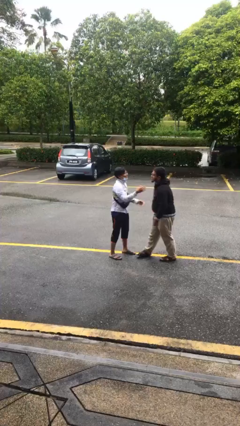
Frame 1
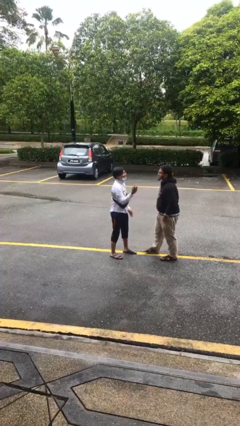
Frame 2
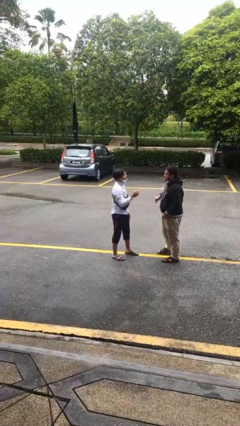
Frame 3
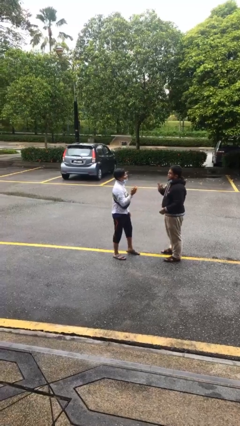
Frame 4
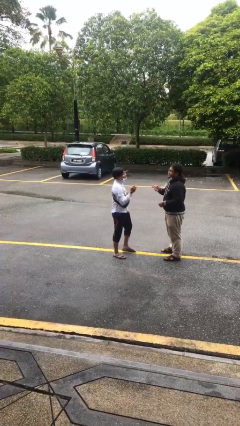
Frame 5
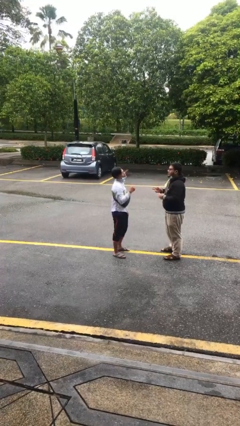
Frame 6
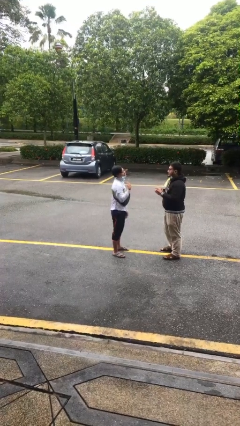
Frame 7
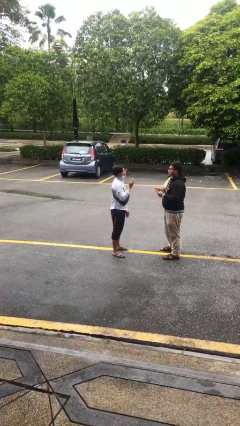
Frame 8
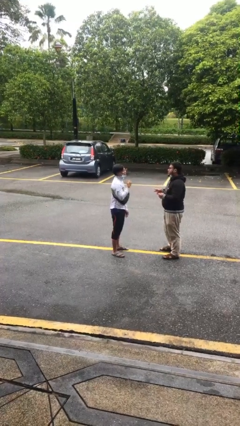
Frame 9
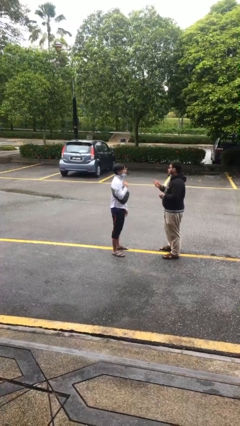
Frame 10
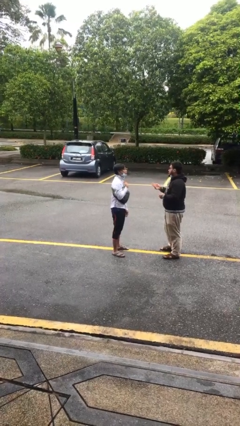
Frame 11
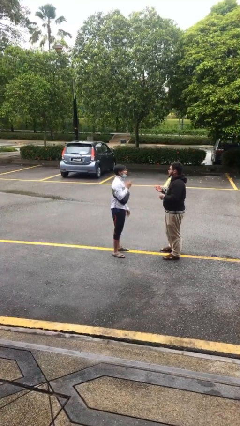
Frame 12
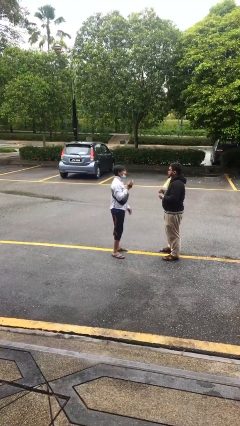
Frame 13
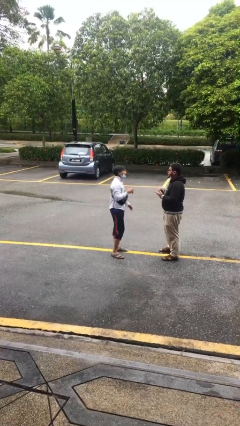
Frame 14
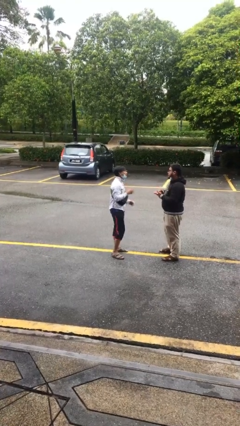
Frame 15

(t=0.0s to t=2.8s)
person talks to person

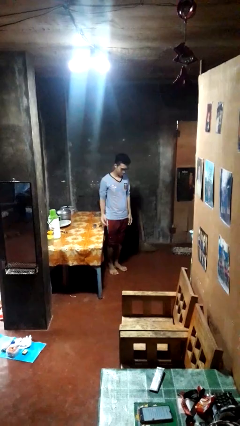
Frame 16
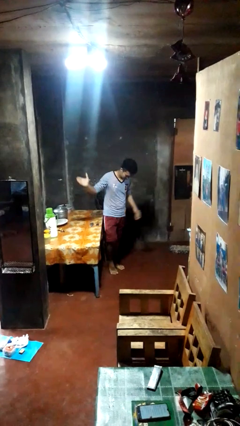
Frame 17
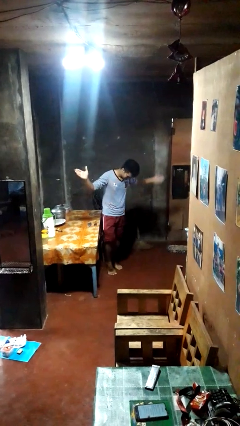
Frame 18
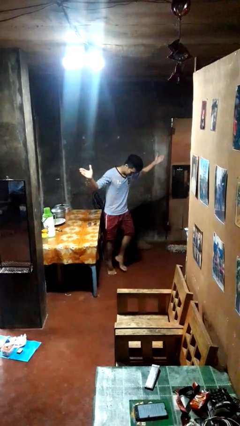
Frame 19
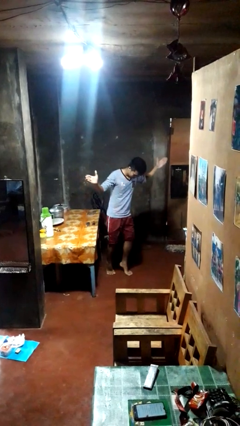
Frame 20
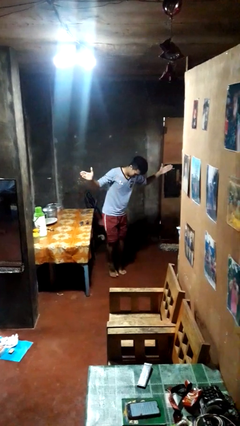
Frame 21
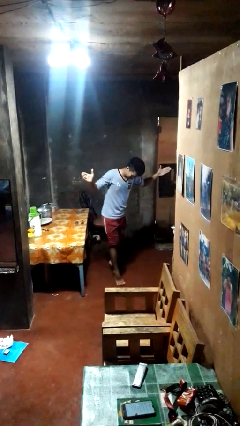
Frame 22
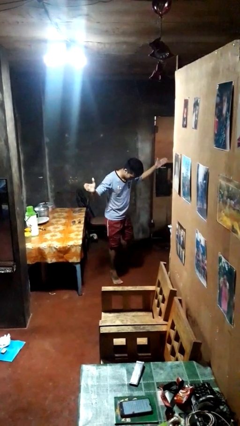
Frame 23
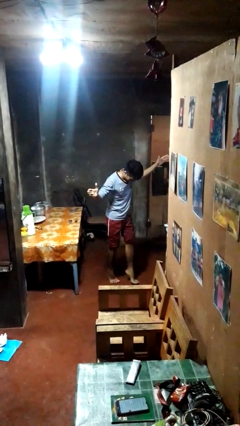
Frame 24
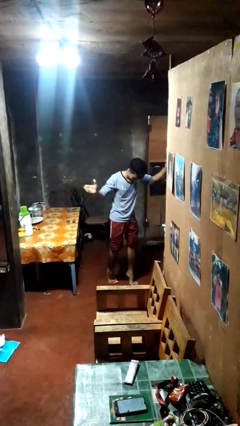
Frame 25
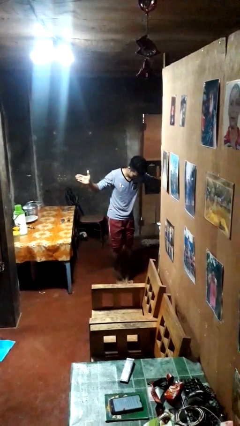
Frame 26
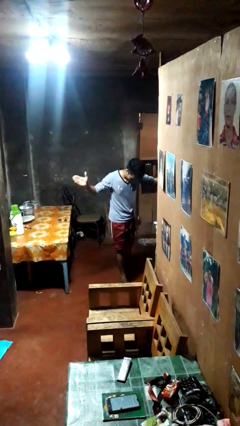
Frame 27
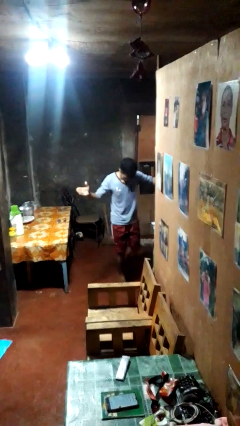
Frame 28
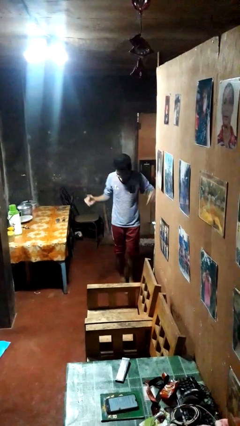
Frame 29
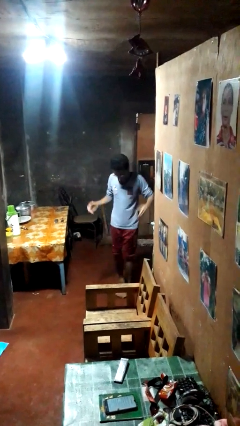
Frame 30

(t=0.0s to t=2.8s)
person walks tiptoe

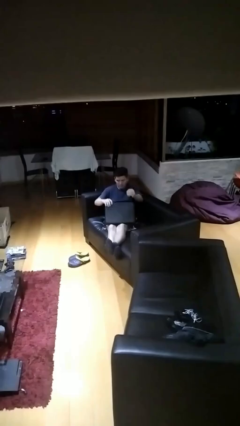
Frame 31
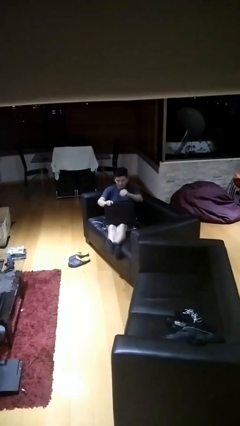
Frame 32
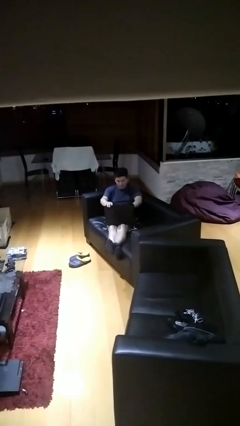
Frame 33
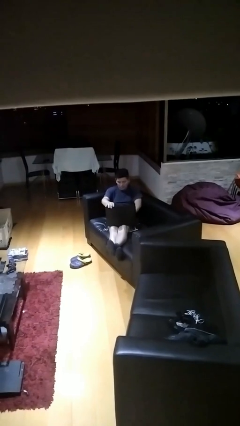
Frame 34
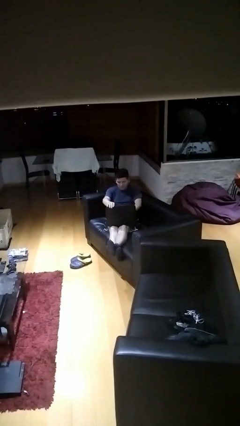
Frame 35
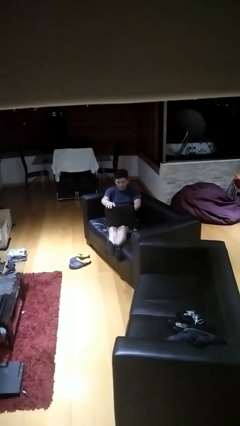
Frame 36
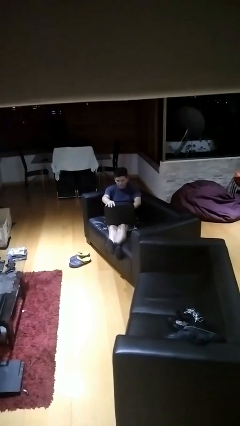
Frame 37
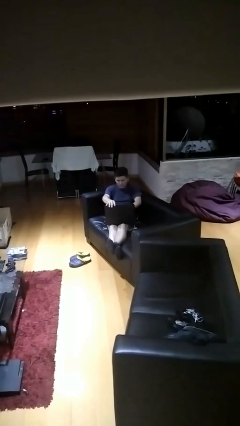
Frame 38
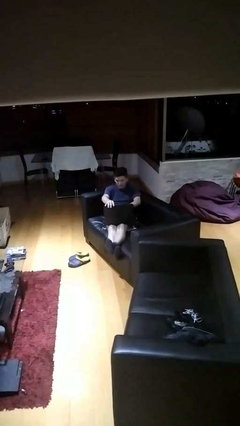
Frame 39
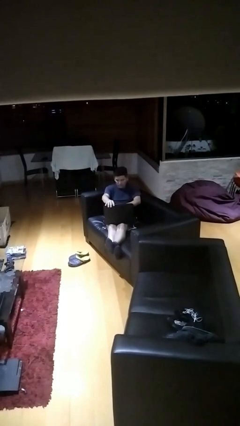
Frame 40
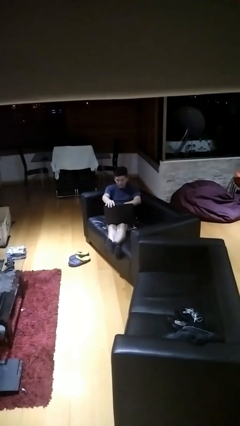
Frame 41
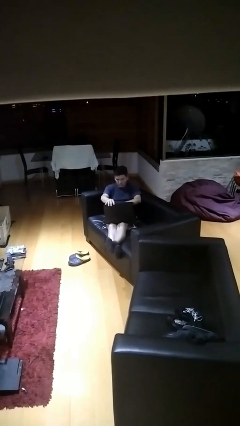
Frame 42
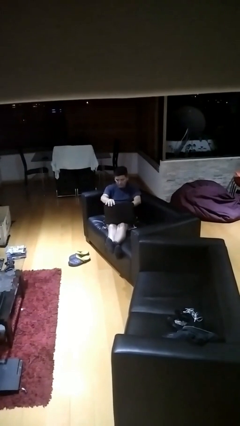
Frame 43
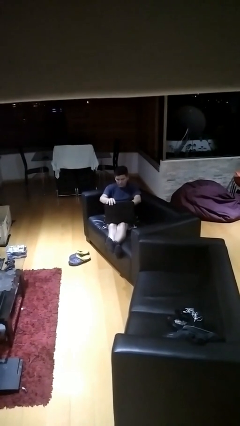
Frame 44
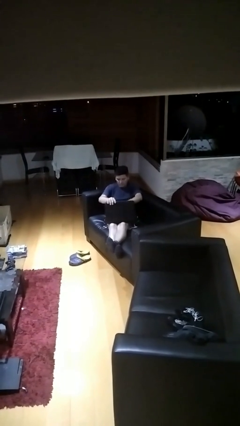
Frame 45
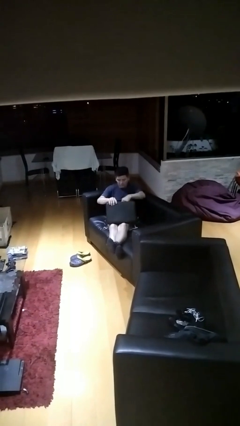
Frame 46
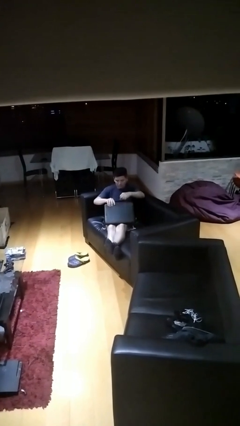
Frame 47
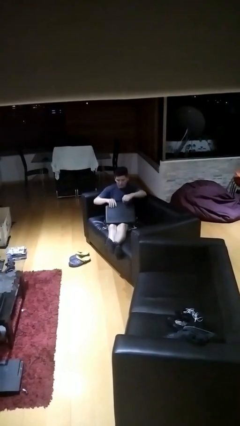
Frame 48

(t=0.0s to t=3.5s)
person interacts with laptop

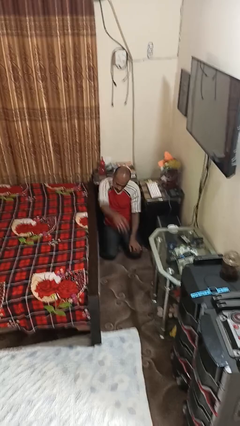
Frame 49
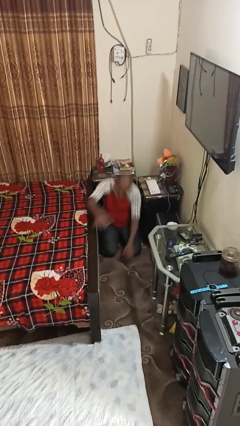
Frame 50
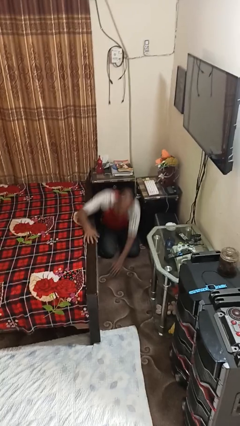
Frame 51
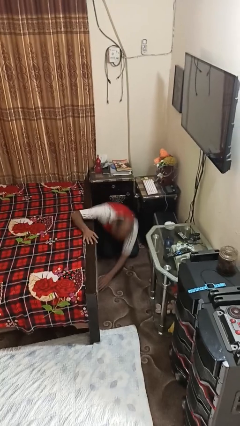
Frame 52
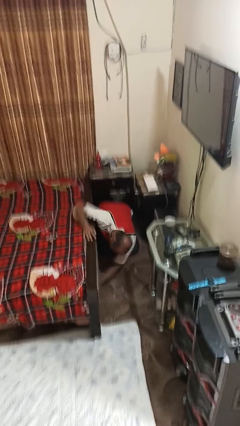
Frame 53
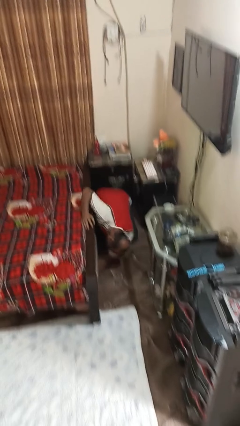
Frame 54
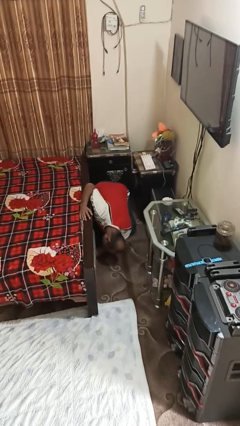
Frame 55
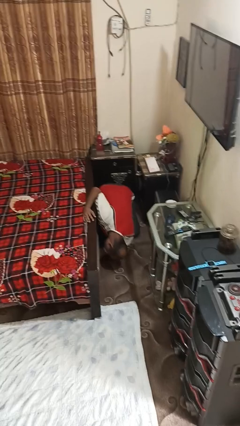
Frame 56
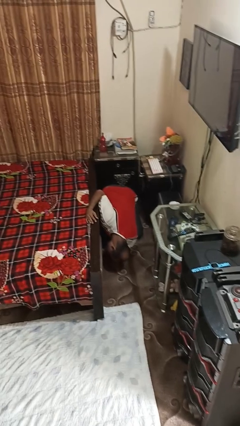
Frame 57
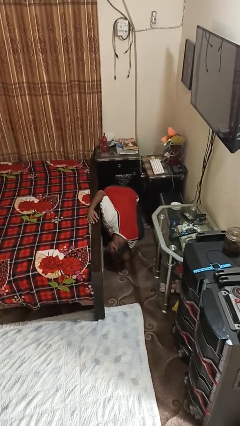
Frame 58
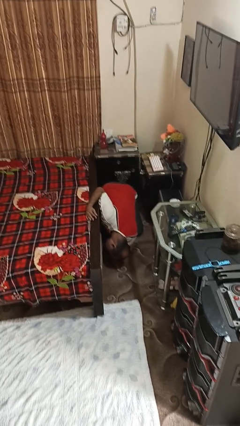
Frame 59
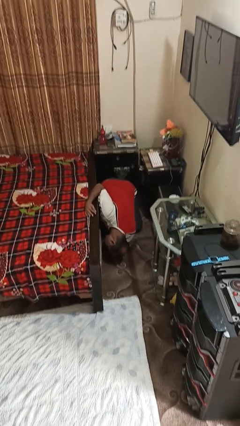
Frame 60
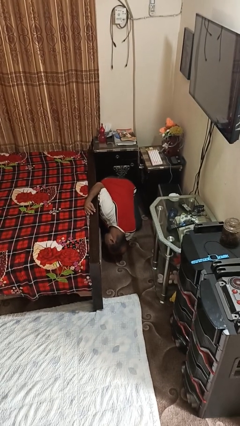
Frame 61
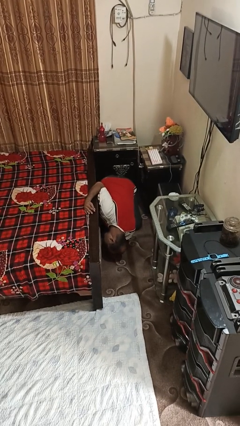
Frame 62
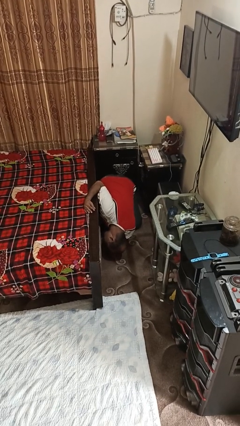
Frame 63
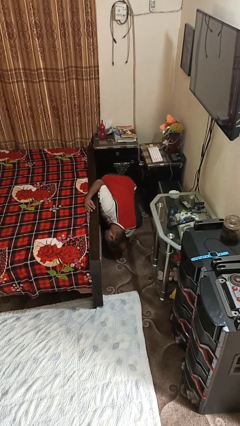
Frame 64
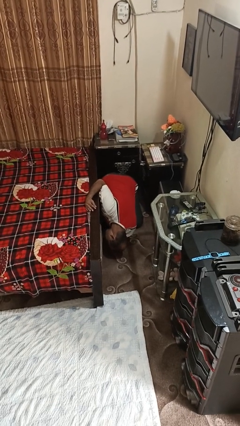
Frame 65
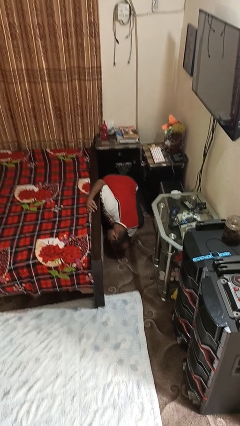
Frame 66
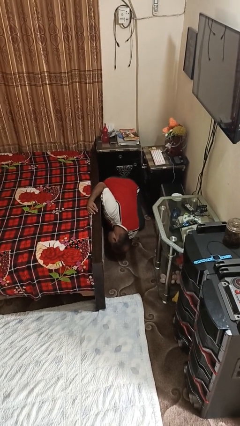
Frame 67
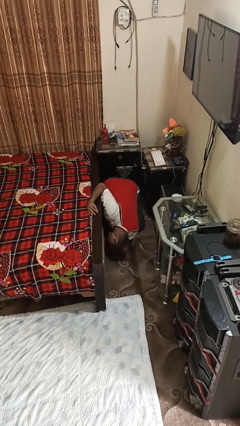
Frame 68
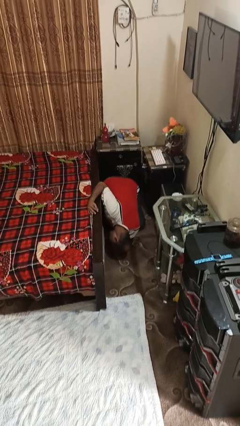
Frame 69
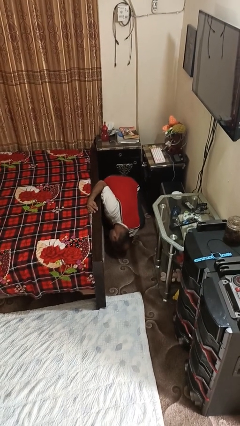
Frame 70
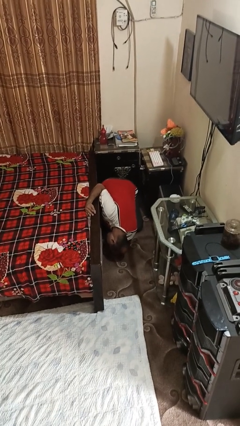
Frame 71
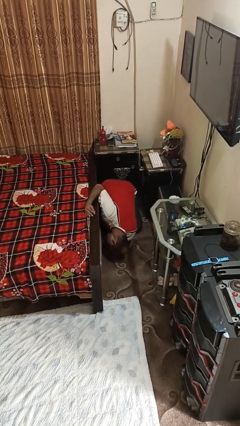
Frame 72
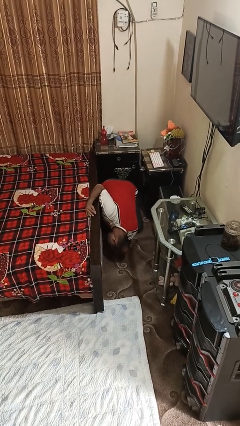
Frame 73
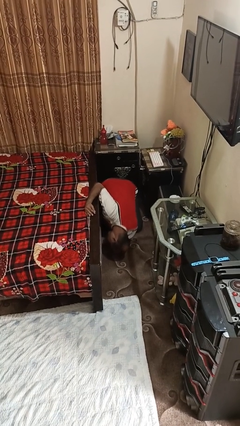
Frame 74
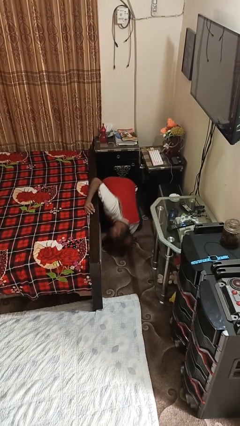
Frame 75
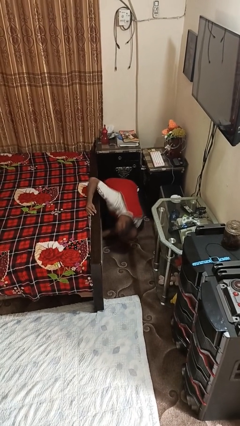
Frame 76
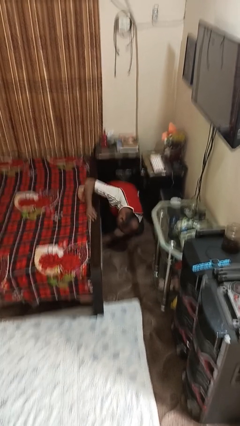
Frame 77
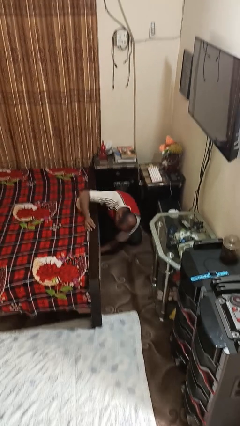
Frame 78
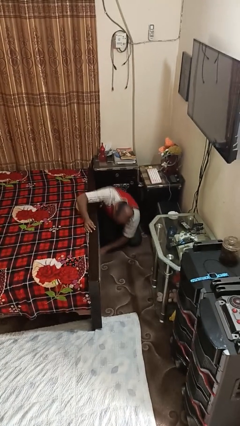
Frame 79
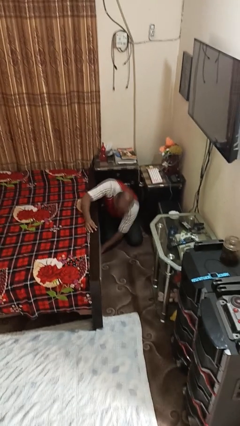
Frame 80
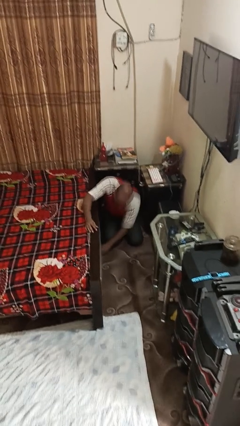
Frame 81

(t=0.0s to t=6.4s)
person searches under bed

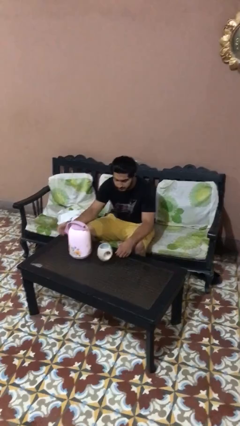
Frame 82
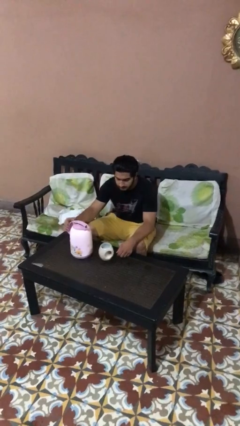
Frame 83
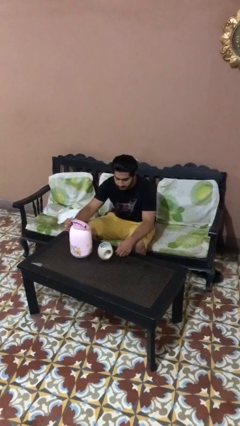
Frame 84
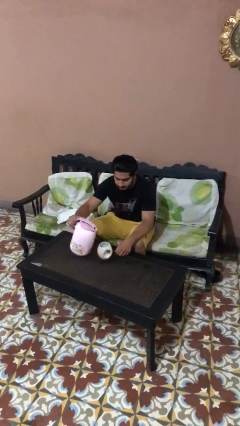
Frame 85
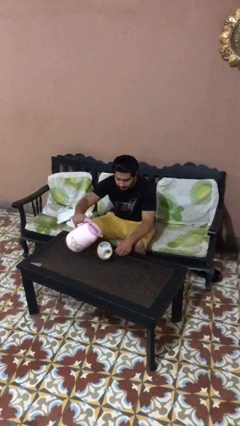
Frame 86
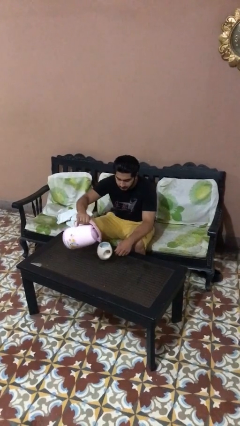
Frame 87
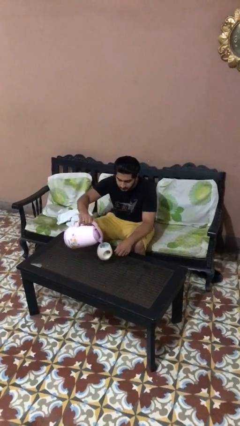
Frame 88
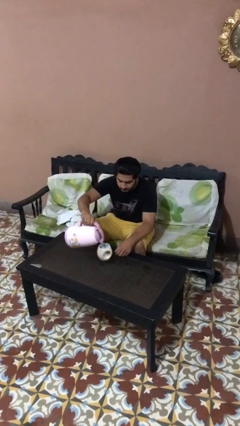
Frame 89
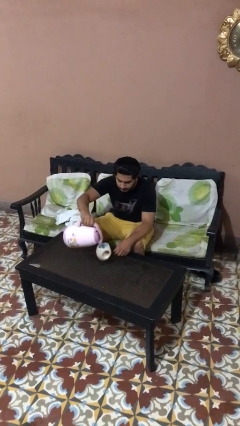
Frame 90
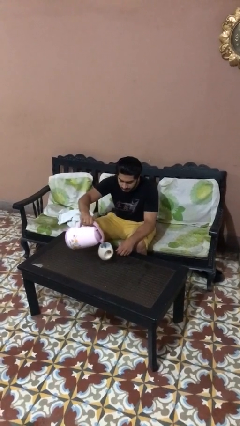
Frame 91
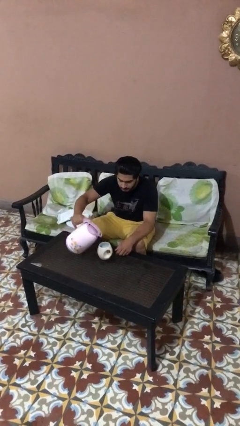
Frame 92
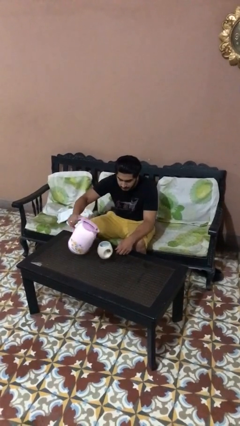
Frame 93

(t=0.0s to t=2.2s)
person pours coffee into mug
